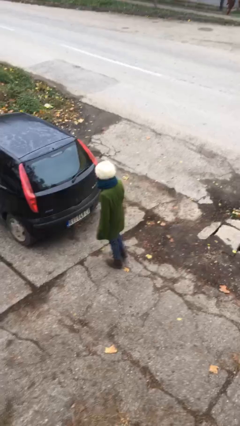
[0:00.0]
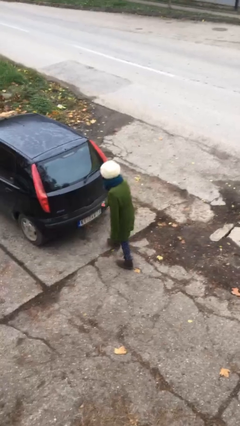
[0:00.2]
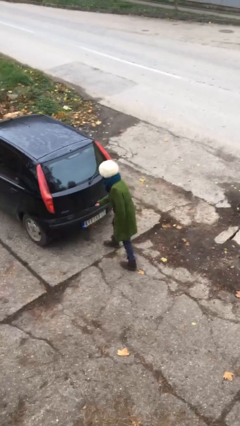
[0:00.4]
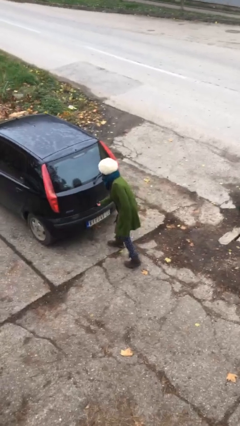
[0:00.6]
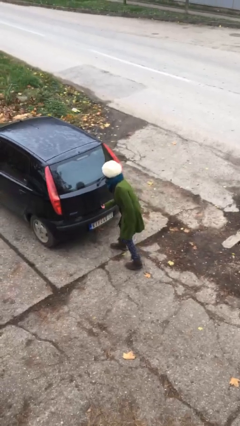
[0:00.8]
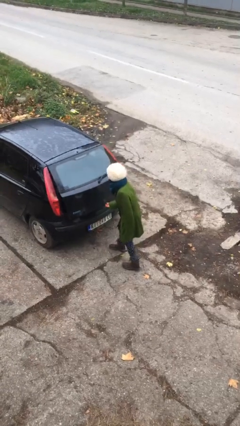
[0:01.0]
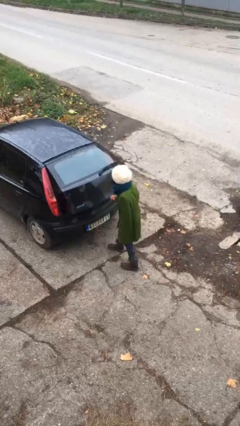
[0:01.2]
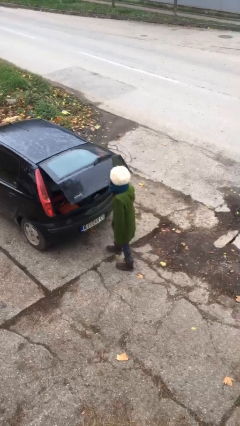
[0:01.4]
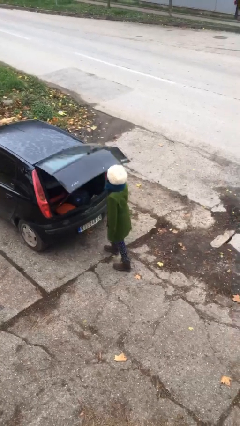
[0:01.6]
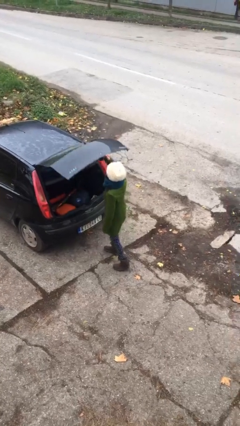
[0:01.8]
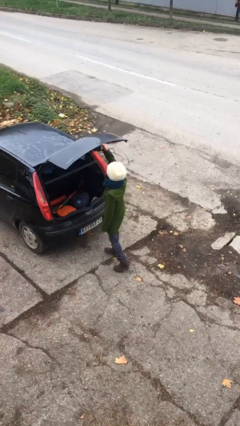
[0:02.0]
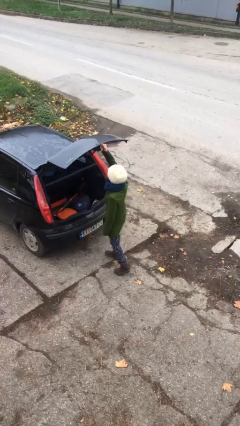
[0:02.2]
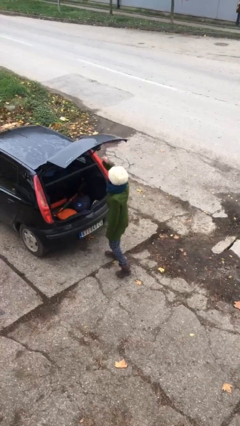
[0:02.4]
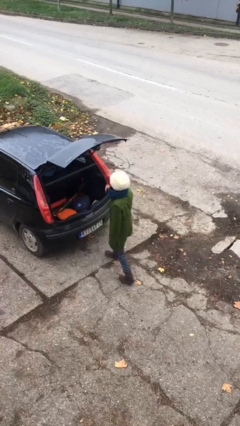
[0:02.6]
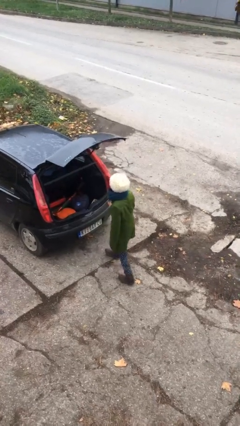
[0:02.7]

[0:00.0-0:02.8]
person opens car trunk

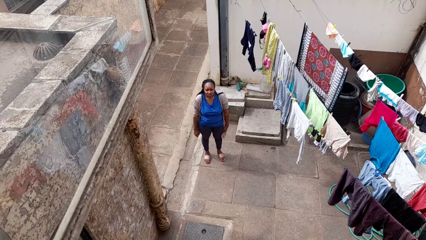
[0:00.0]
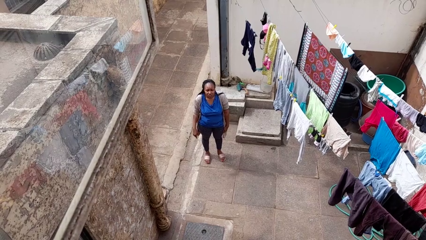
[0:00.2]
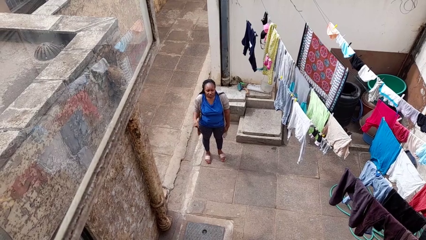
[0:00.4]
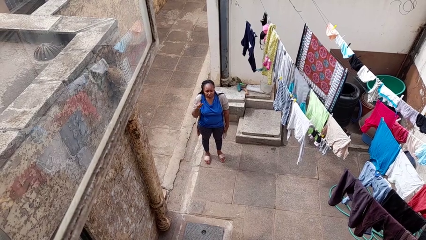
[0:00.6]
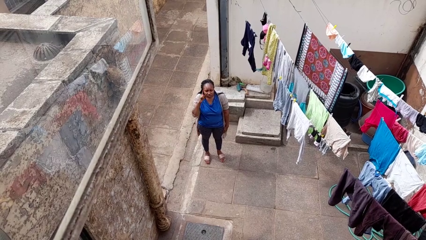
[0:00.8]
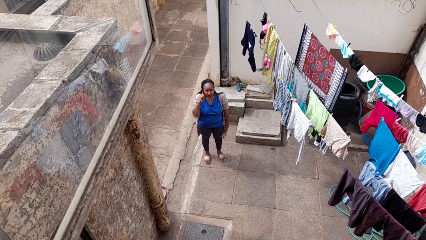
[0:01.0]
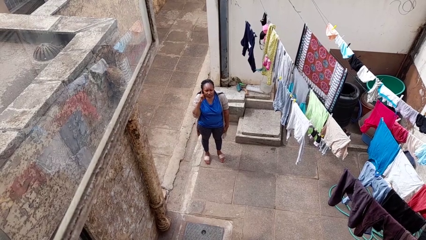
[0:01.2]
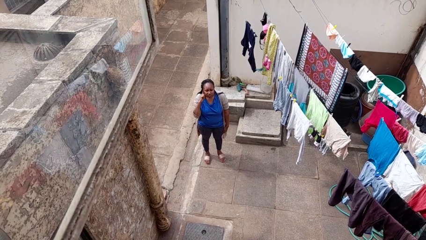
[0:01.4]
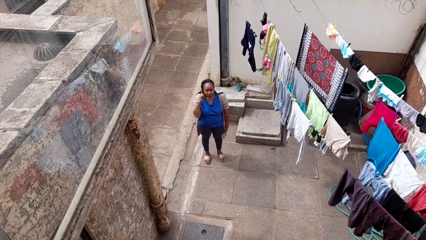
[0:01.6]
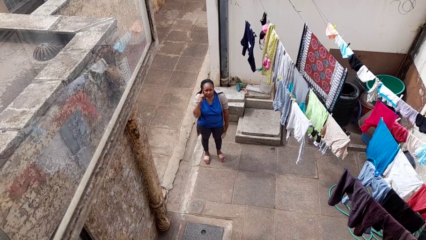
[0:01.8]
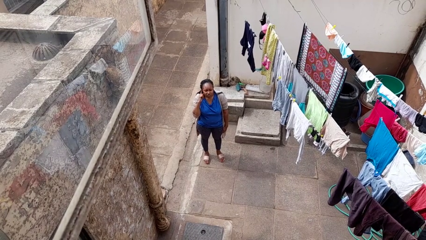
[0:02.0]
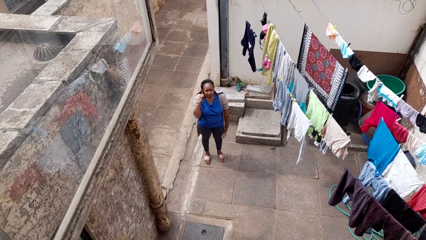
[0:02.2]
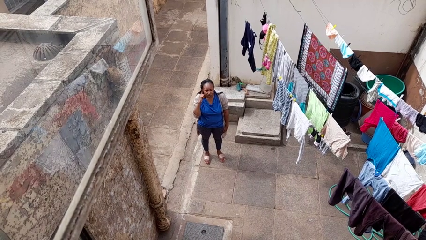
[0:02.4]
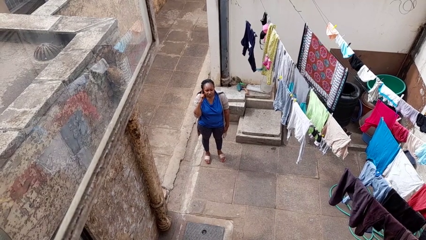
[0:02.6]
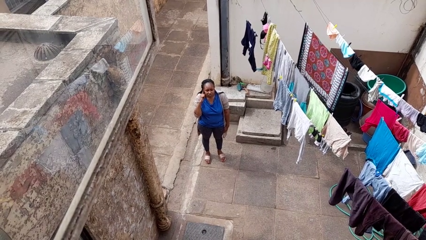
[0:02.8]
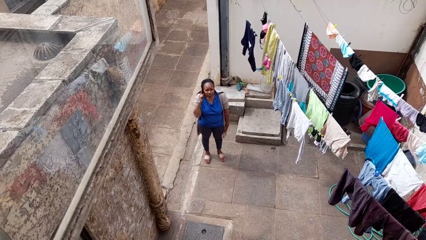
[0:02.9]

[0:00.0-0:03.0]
person gestures listen closely

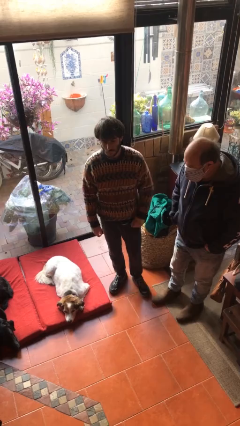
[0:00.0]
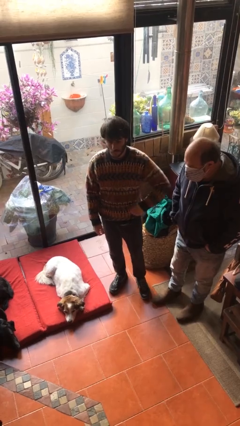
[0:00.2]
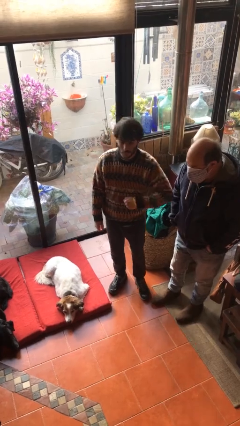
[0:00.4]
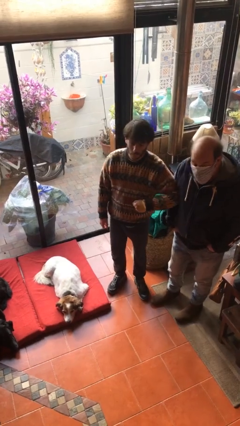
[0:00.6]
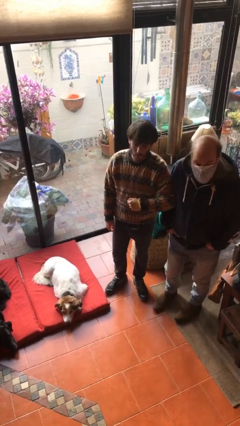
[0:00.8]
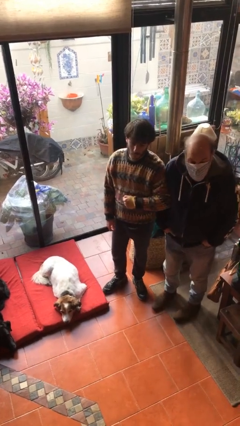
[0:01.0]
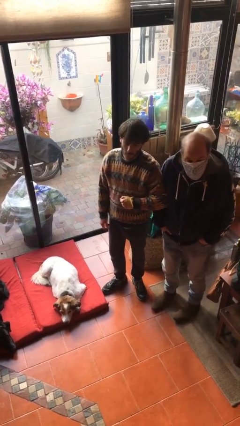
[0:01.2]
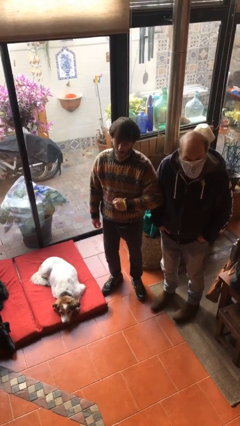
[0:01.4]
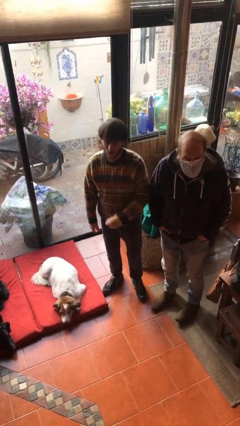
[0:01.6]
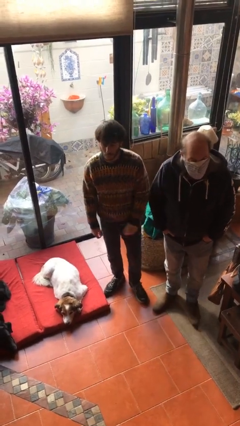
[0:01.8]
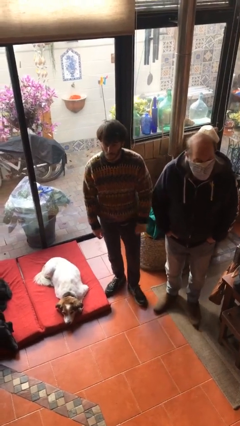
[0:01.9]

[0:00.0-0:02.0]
person nudges person with elbow

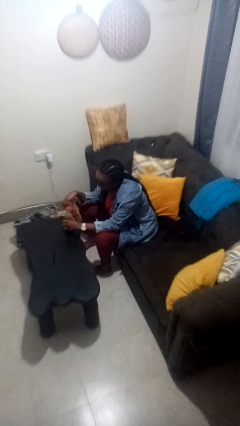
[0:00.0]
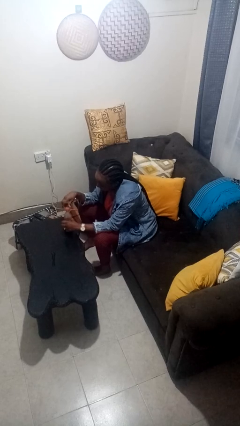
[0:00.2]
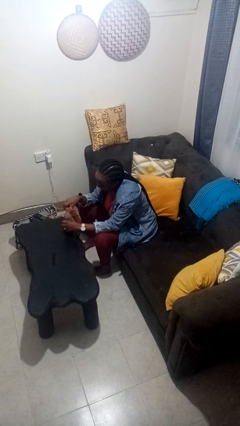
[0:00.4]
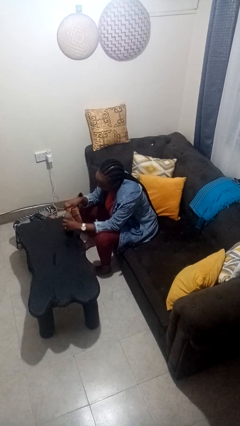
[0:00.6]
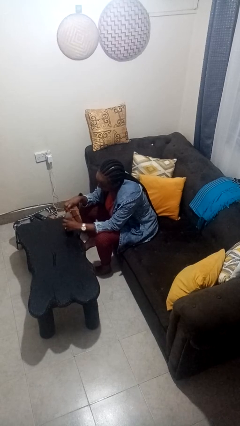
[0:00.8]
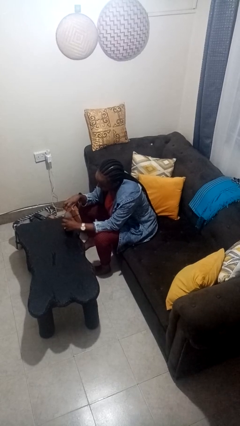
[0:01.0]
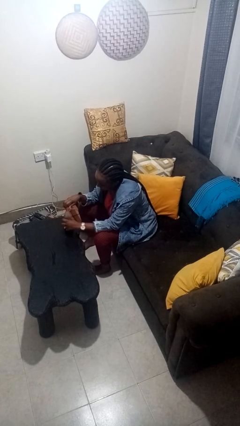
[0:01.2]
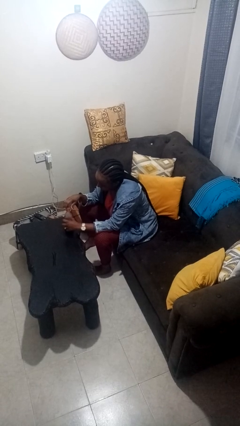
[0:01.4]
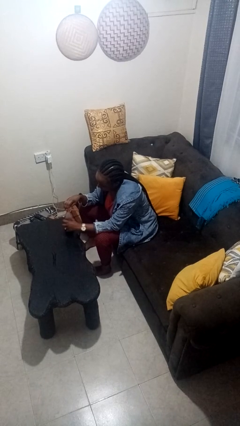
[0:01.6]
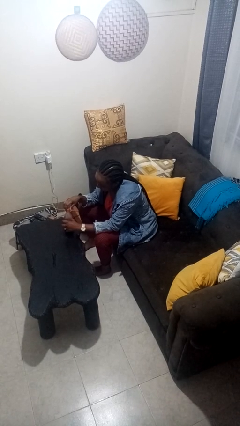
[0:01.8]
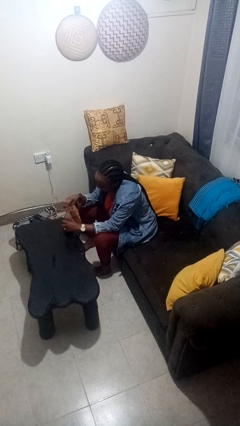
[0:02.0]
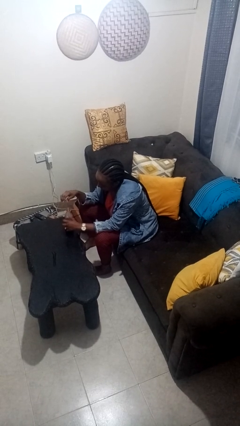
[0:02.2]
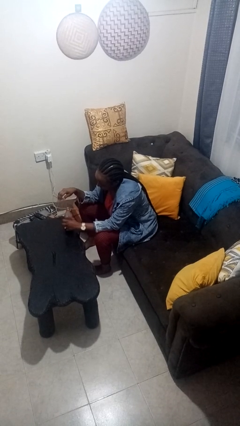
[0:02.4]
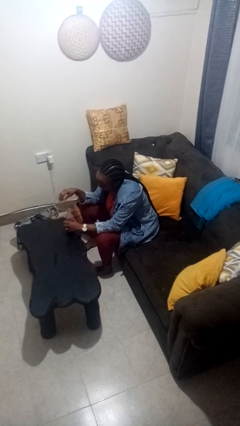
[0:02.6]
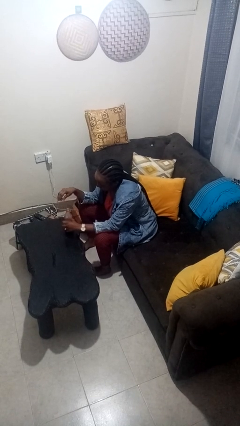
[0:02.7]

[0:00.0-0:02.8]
person unscrews lid from bottle

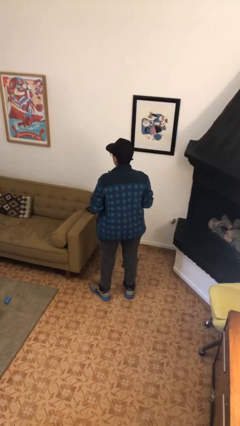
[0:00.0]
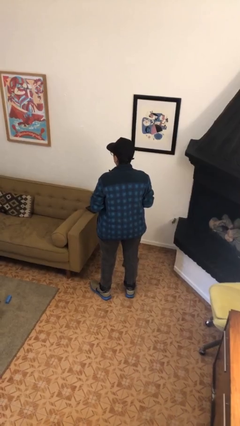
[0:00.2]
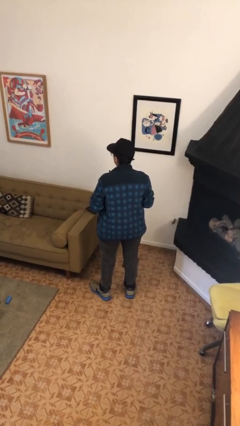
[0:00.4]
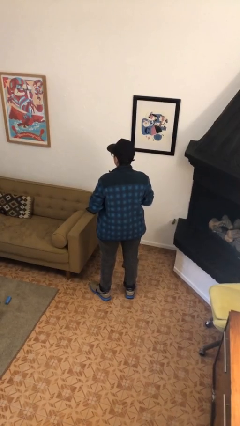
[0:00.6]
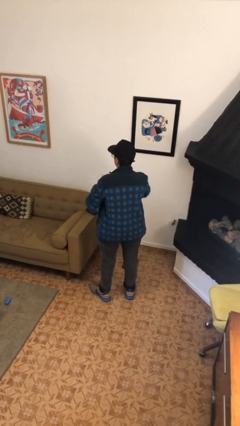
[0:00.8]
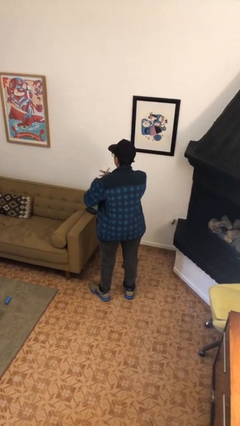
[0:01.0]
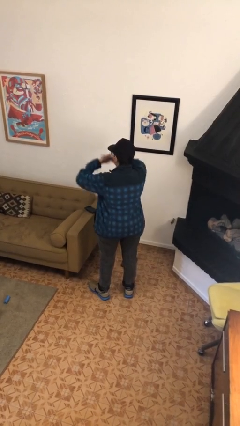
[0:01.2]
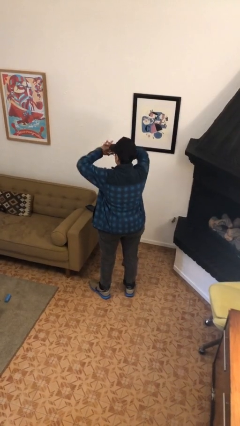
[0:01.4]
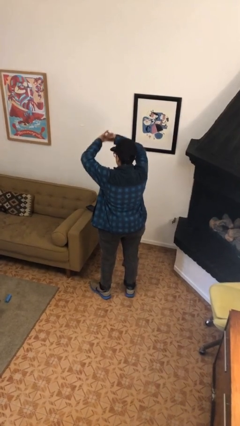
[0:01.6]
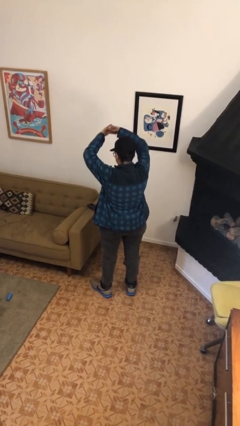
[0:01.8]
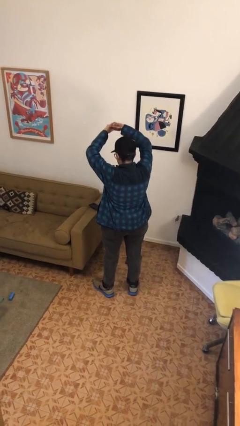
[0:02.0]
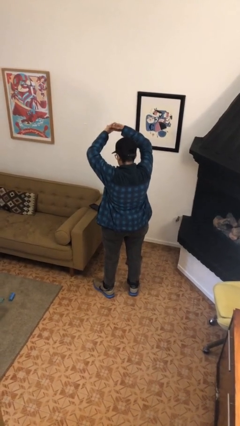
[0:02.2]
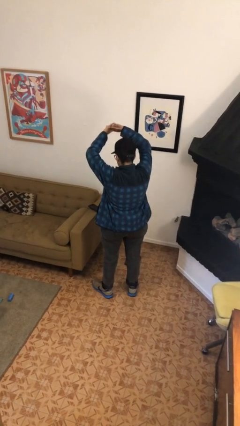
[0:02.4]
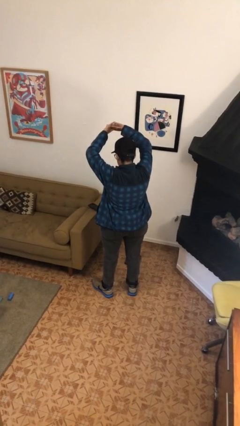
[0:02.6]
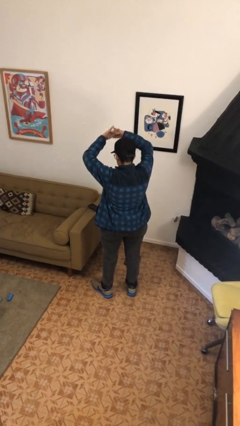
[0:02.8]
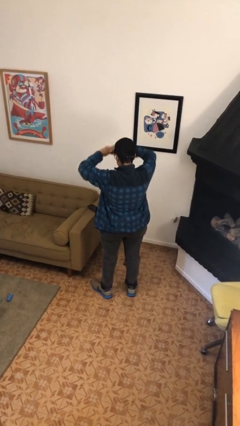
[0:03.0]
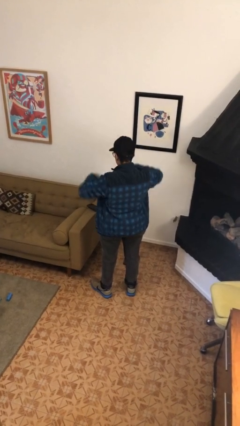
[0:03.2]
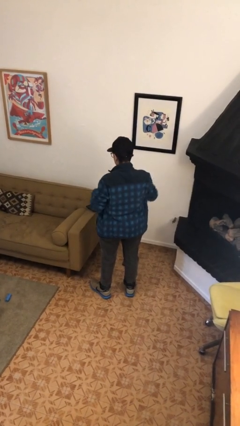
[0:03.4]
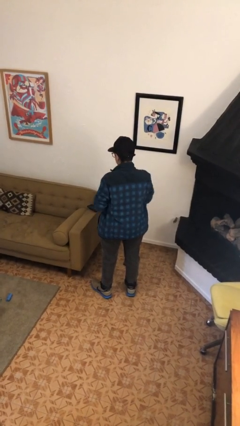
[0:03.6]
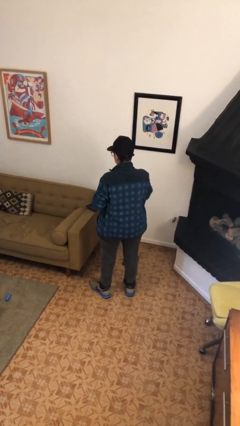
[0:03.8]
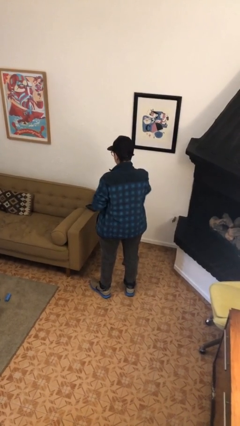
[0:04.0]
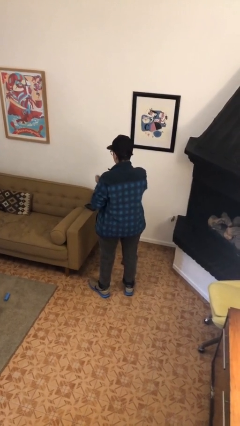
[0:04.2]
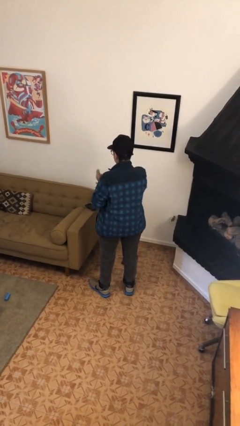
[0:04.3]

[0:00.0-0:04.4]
person cracks knuckles

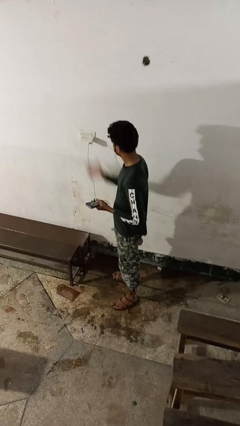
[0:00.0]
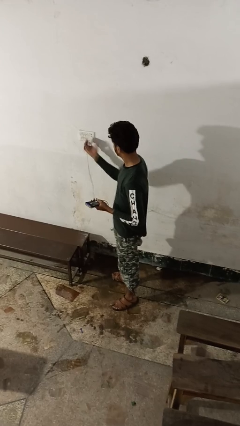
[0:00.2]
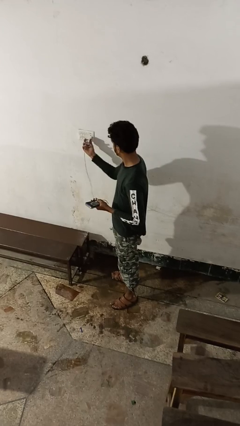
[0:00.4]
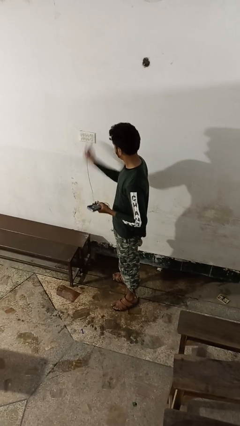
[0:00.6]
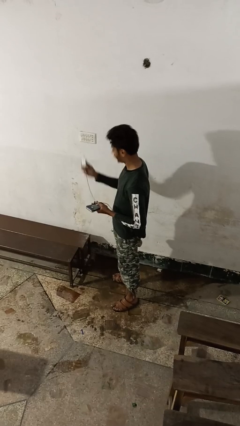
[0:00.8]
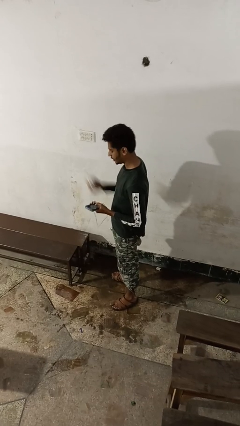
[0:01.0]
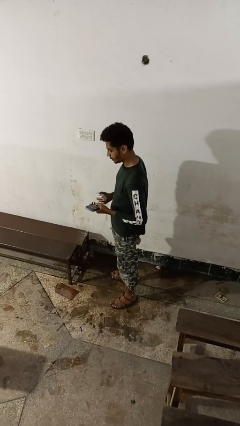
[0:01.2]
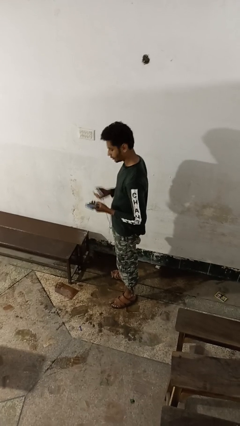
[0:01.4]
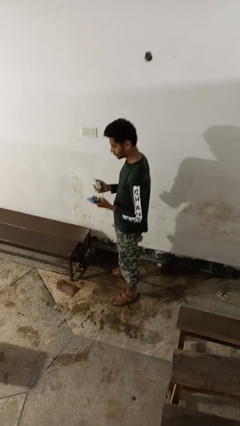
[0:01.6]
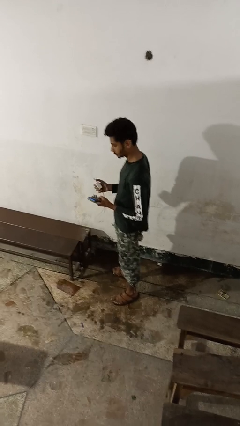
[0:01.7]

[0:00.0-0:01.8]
person unplugs from electrical socket

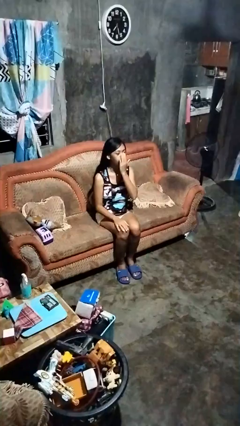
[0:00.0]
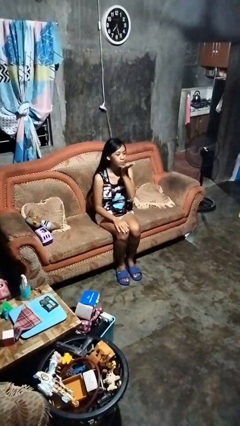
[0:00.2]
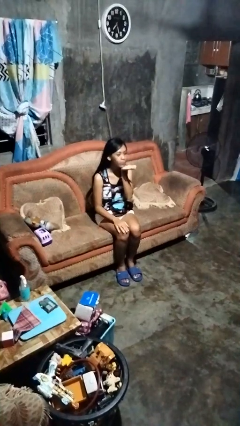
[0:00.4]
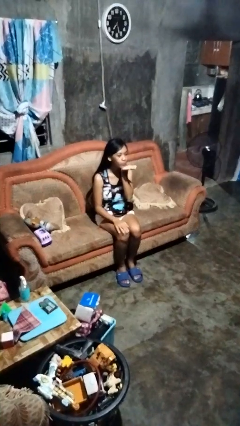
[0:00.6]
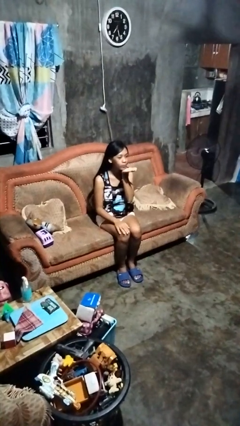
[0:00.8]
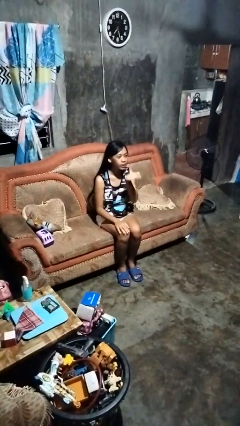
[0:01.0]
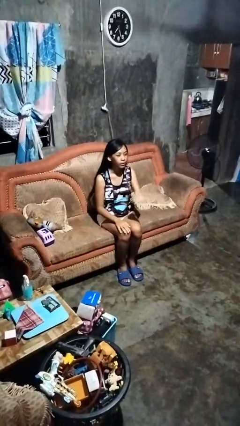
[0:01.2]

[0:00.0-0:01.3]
person gestures blow kiss
